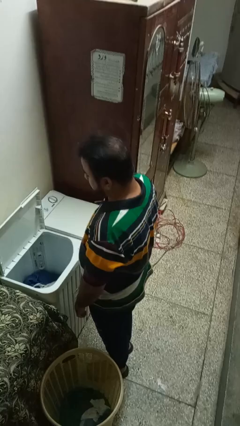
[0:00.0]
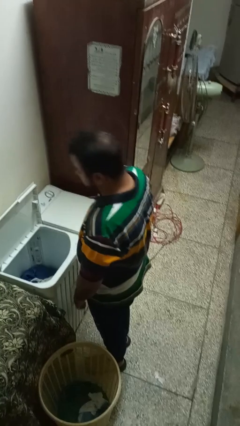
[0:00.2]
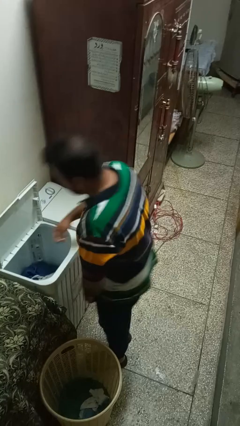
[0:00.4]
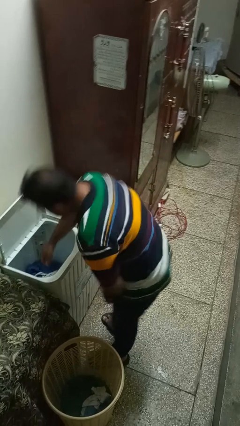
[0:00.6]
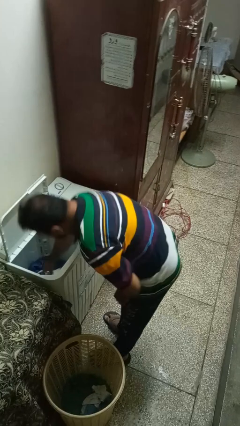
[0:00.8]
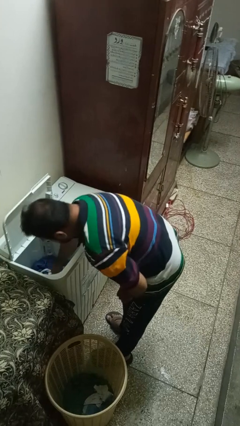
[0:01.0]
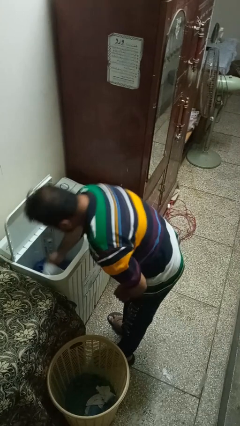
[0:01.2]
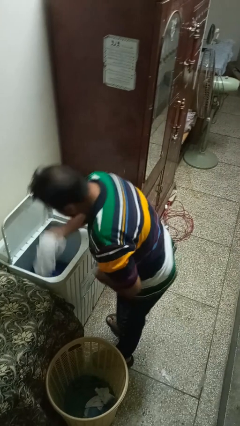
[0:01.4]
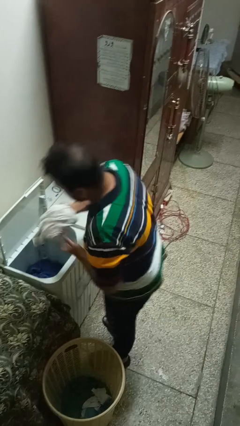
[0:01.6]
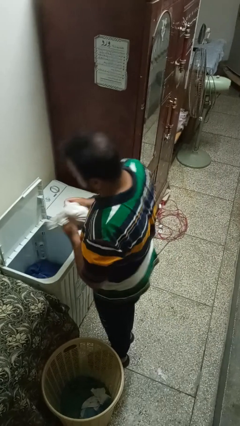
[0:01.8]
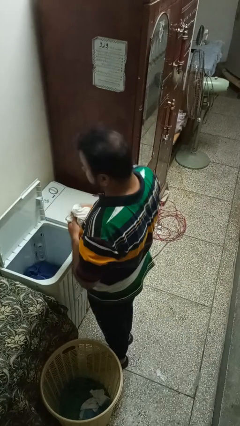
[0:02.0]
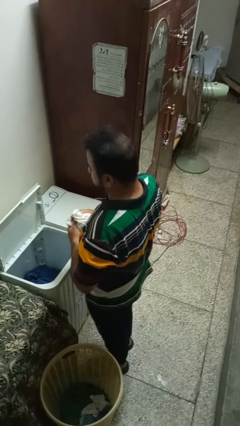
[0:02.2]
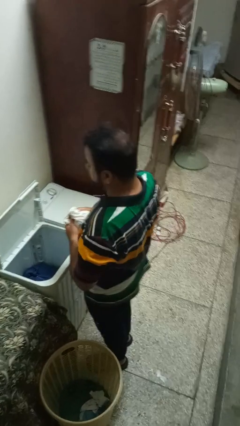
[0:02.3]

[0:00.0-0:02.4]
person unloads clotheswasher

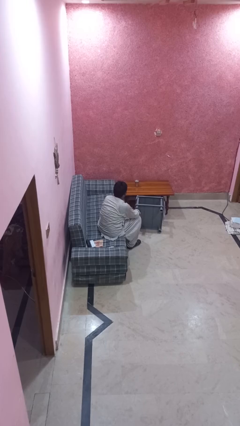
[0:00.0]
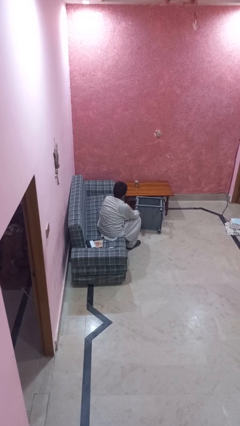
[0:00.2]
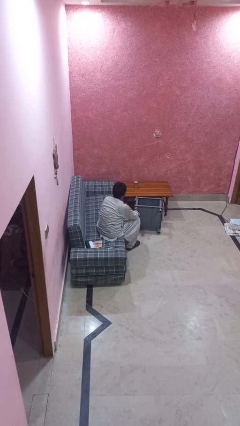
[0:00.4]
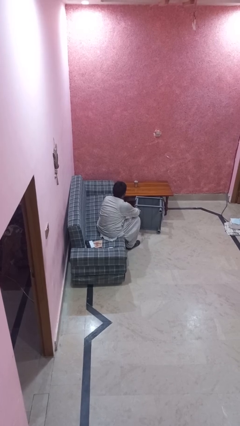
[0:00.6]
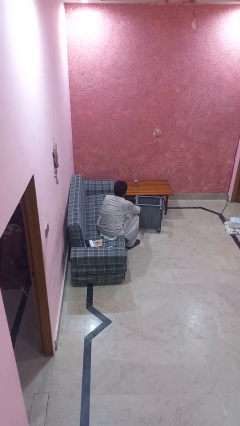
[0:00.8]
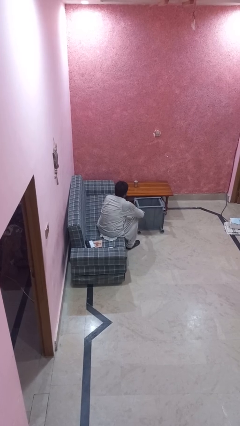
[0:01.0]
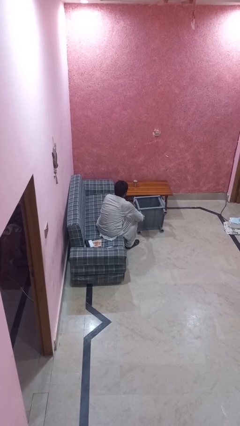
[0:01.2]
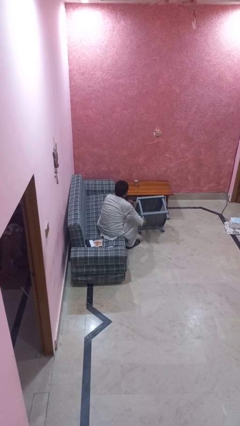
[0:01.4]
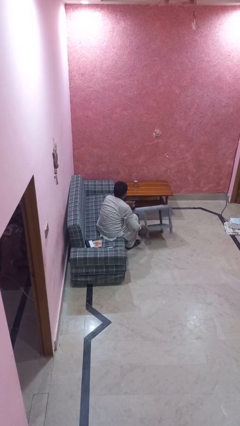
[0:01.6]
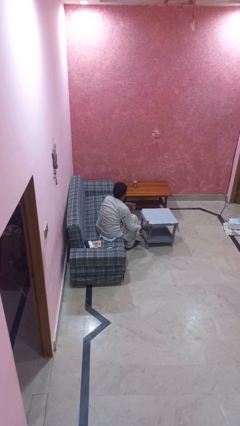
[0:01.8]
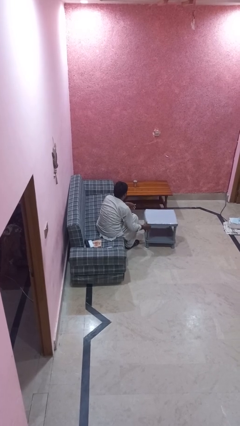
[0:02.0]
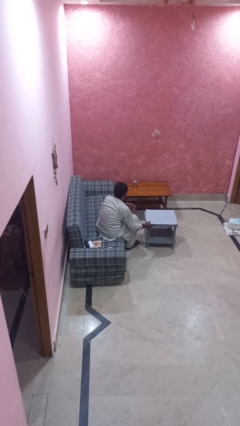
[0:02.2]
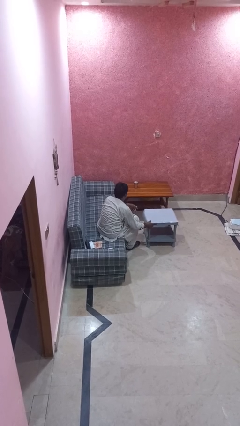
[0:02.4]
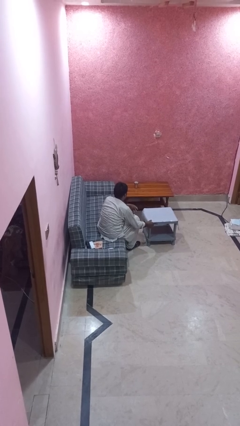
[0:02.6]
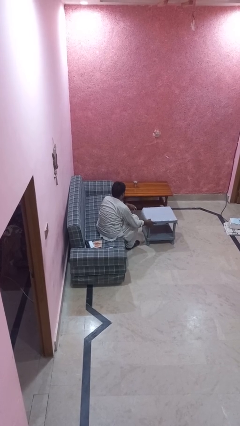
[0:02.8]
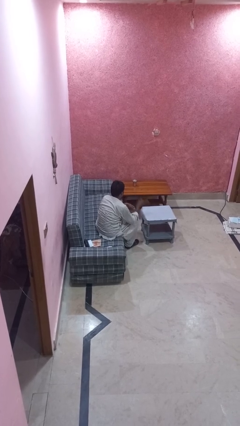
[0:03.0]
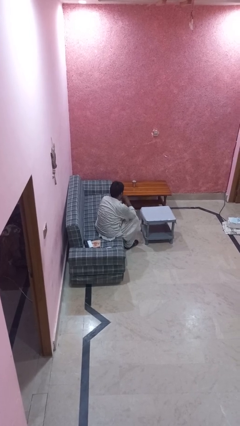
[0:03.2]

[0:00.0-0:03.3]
person sets upright furniture

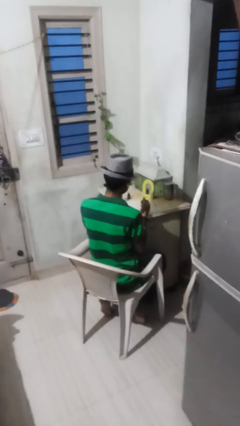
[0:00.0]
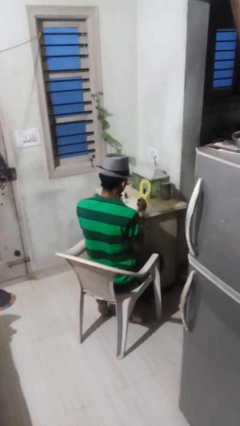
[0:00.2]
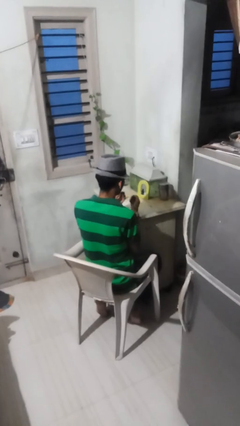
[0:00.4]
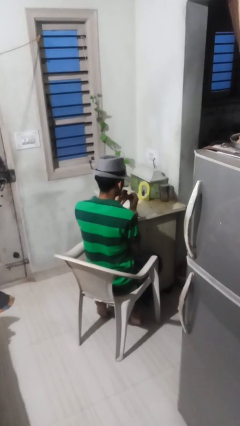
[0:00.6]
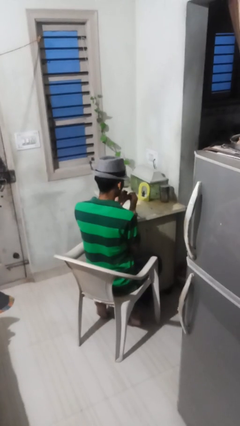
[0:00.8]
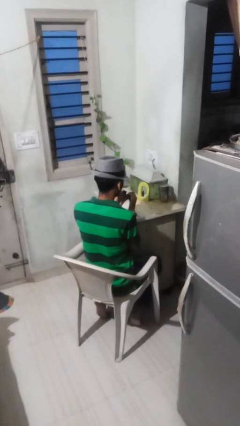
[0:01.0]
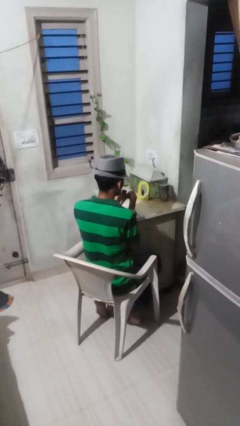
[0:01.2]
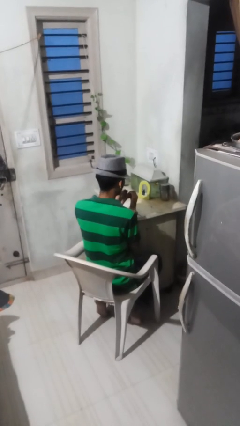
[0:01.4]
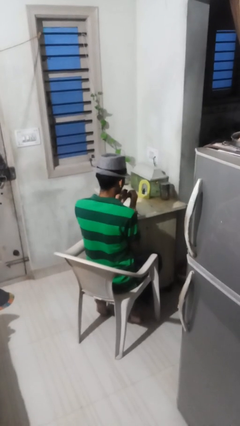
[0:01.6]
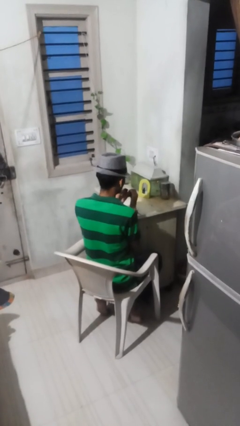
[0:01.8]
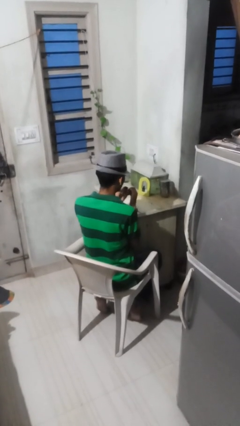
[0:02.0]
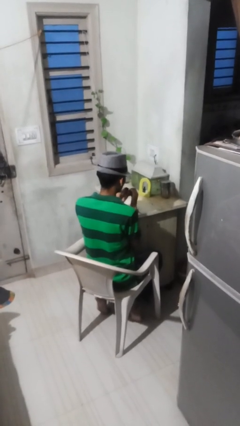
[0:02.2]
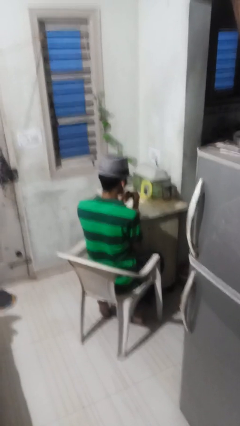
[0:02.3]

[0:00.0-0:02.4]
person paints fingernails

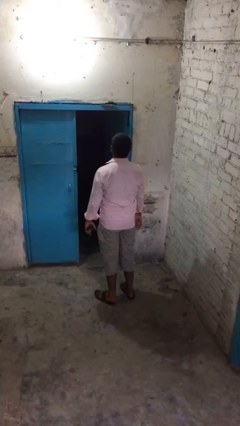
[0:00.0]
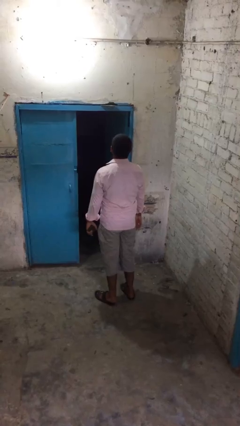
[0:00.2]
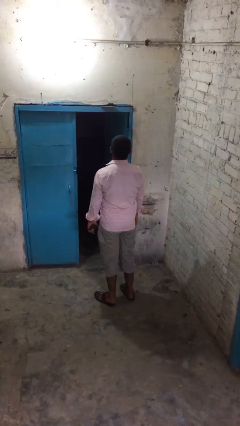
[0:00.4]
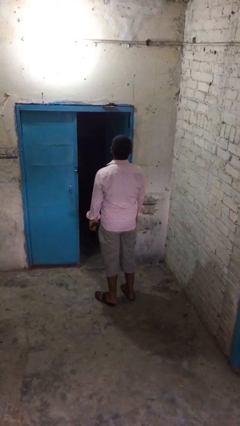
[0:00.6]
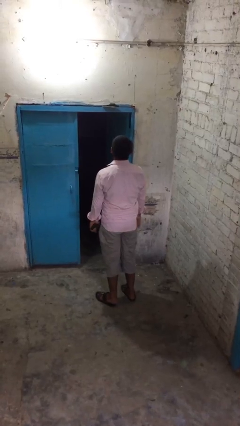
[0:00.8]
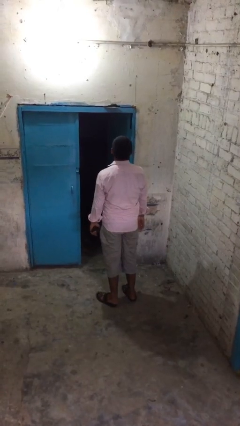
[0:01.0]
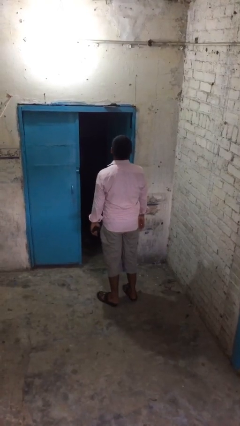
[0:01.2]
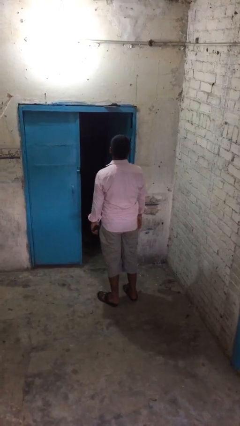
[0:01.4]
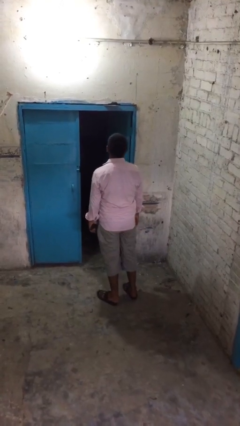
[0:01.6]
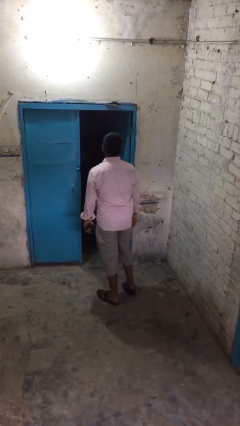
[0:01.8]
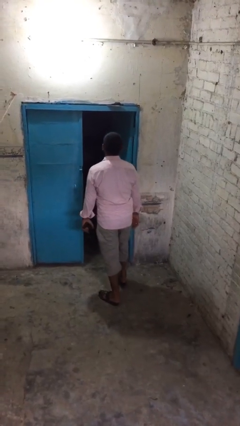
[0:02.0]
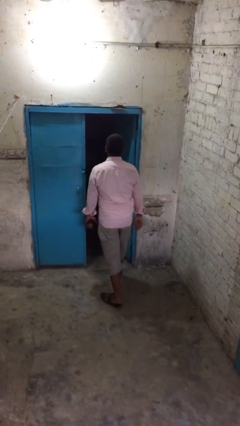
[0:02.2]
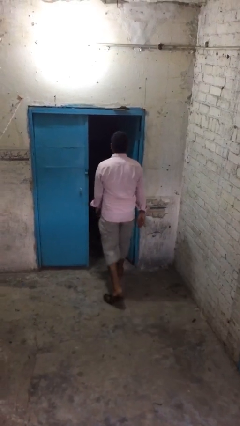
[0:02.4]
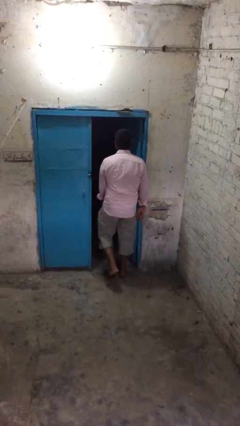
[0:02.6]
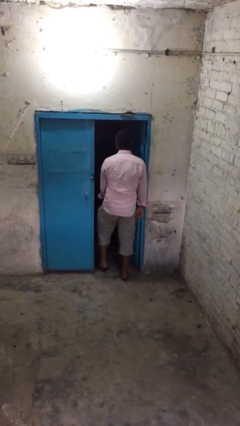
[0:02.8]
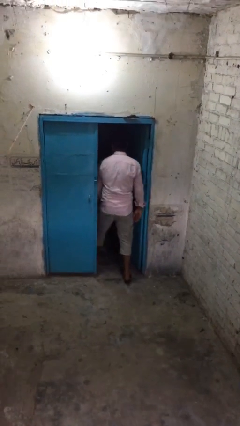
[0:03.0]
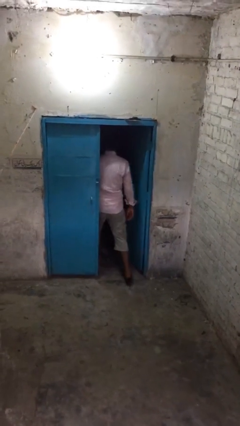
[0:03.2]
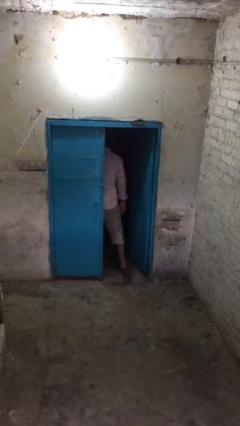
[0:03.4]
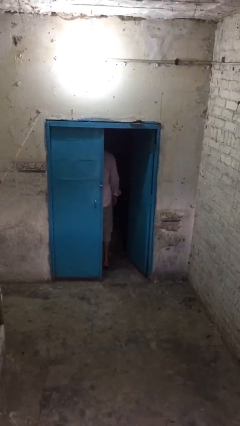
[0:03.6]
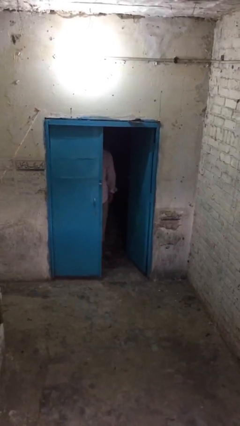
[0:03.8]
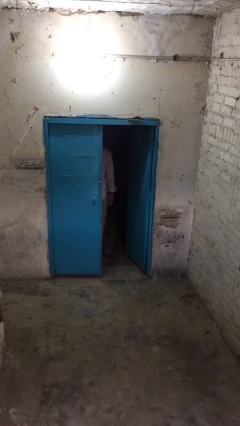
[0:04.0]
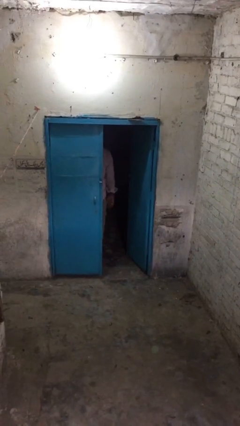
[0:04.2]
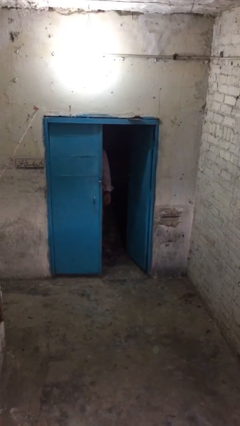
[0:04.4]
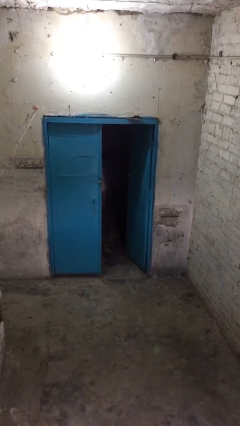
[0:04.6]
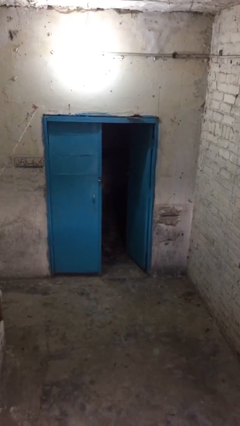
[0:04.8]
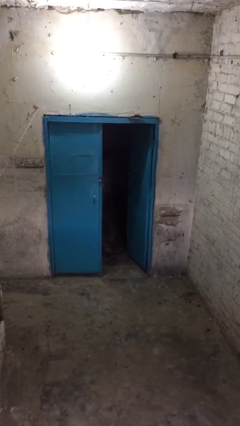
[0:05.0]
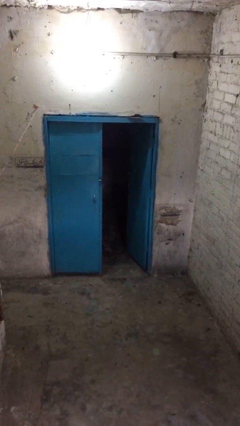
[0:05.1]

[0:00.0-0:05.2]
person exits scene through structure

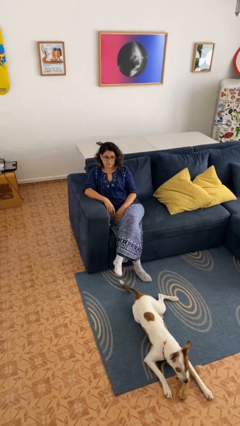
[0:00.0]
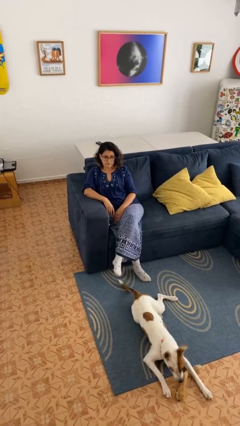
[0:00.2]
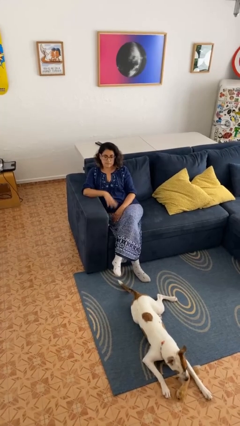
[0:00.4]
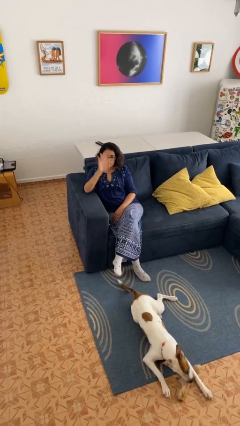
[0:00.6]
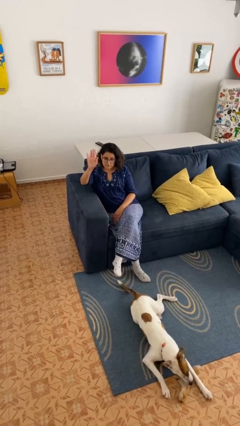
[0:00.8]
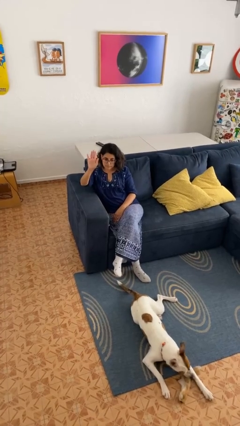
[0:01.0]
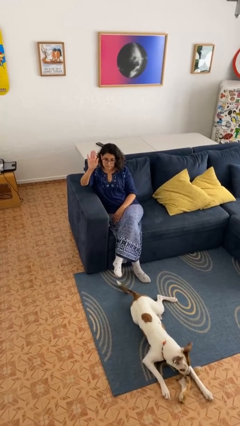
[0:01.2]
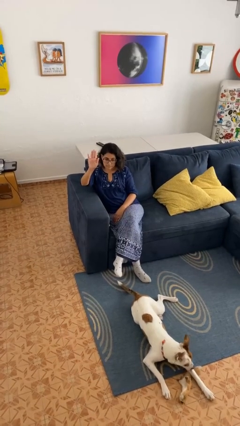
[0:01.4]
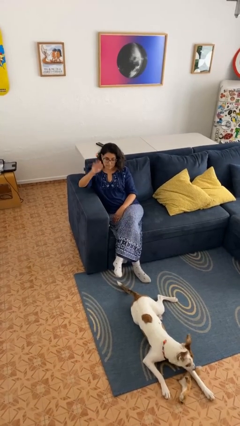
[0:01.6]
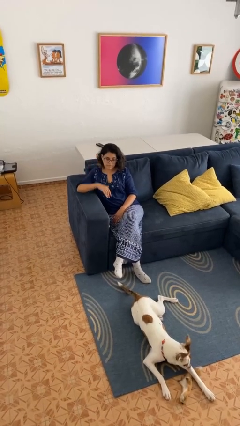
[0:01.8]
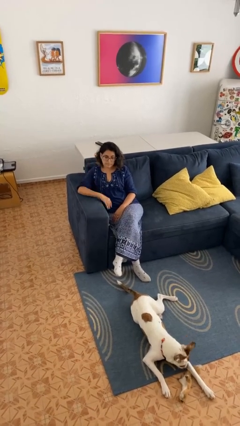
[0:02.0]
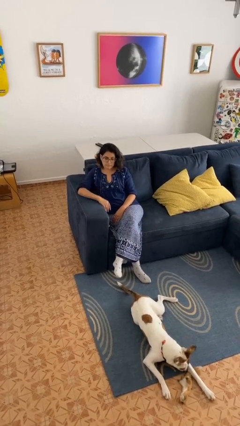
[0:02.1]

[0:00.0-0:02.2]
person gestures stop

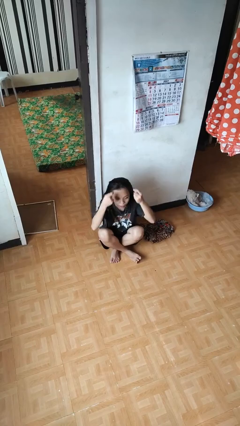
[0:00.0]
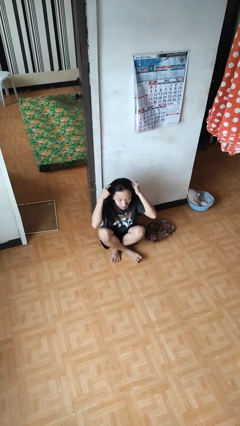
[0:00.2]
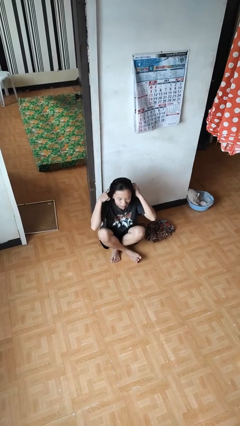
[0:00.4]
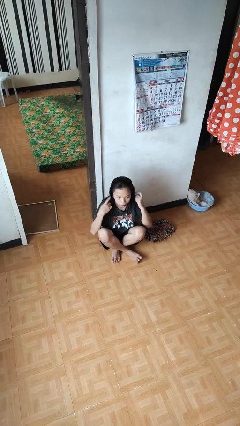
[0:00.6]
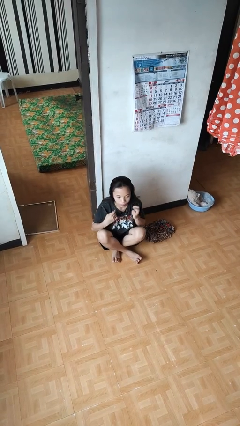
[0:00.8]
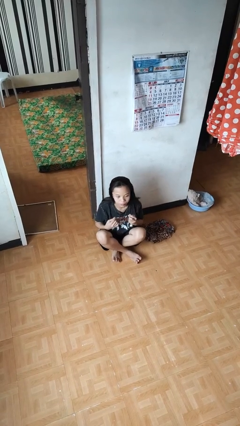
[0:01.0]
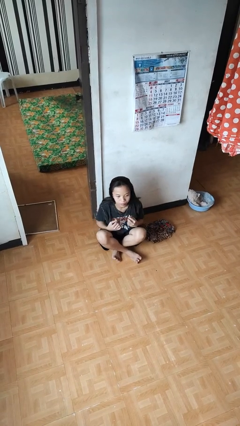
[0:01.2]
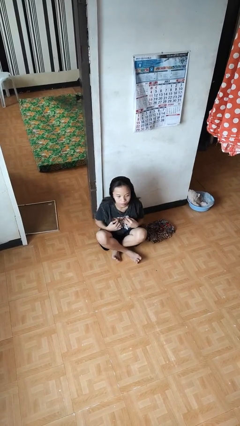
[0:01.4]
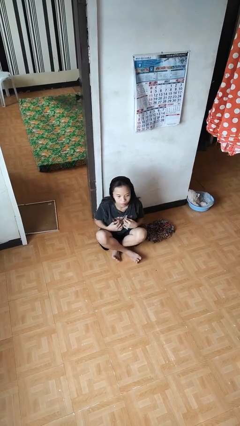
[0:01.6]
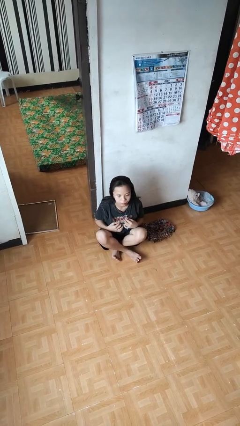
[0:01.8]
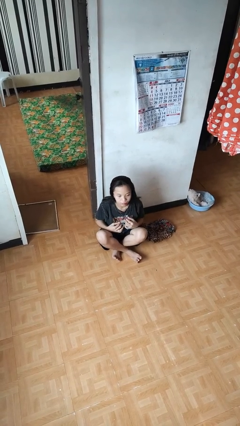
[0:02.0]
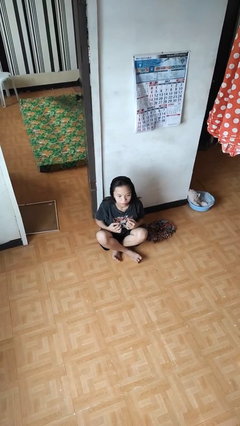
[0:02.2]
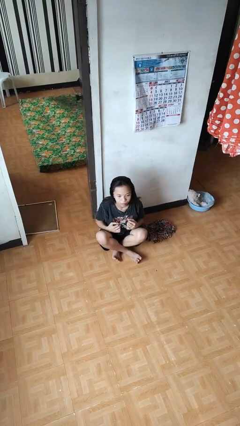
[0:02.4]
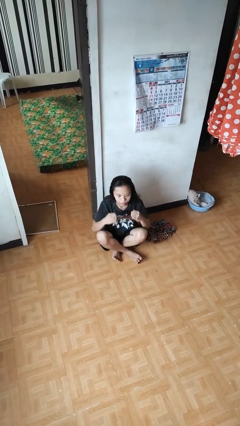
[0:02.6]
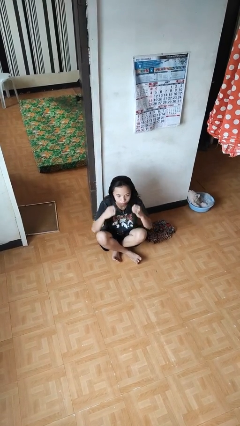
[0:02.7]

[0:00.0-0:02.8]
person puts on necklace
